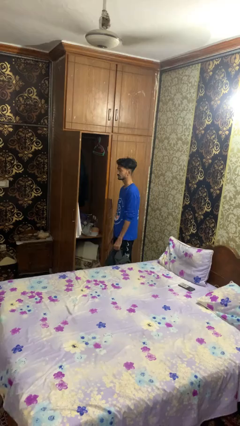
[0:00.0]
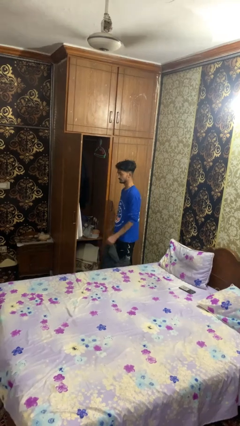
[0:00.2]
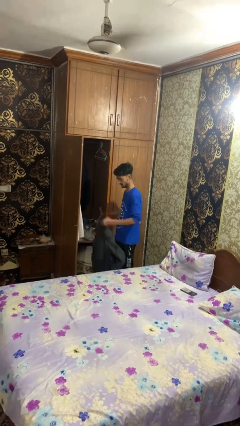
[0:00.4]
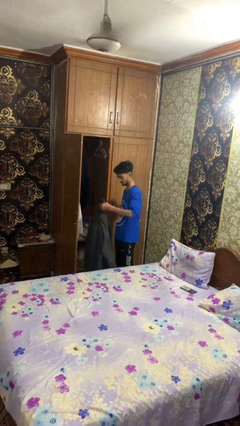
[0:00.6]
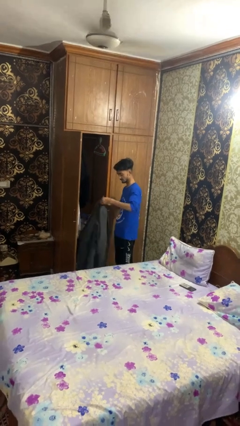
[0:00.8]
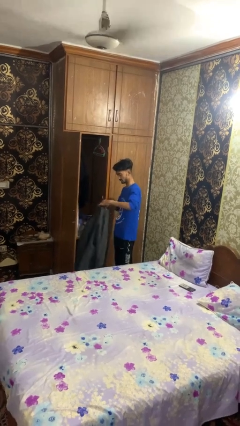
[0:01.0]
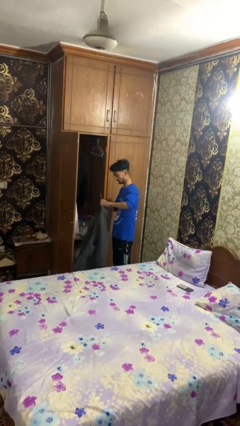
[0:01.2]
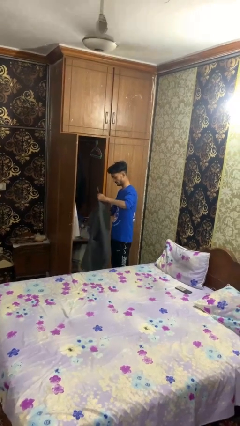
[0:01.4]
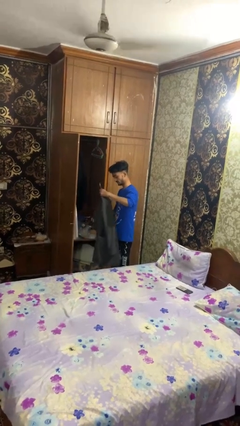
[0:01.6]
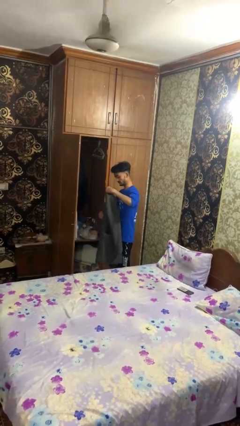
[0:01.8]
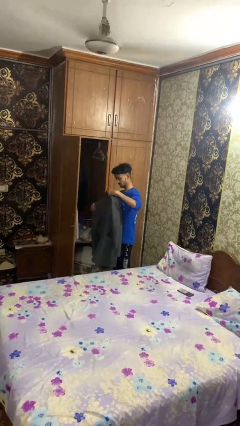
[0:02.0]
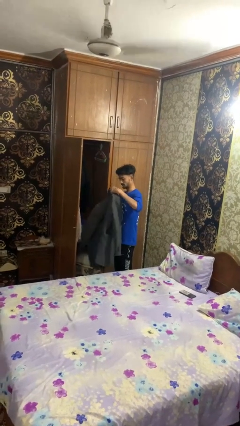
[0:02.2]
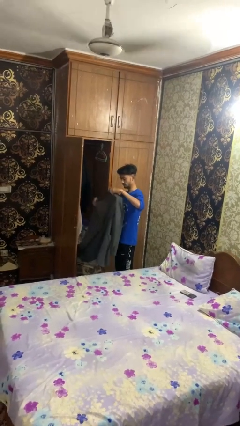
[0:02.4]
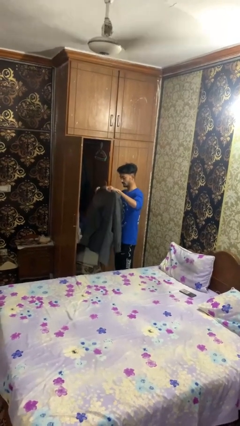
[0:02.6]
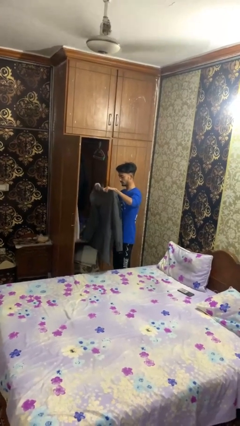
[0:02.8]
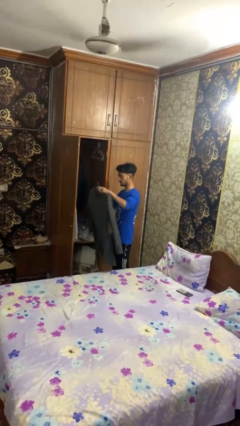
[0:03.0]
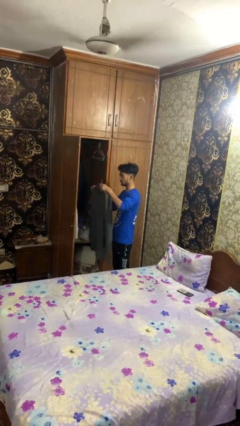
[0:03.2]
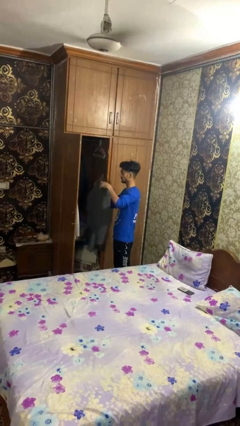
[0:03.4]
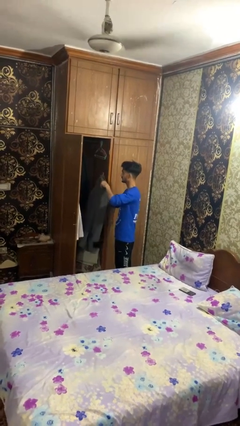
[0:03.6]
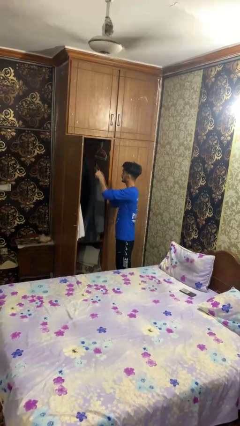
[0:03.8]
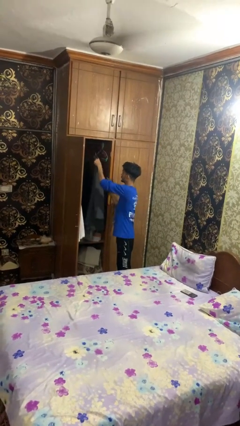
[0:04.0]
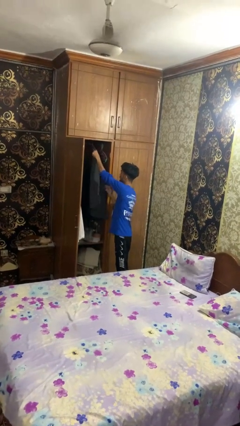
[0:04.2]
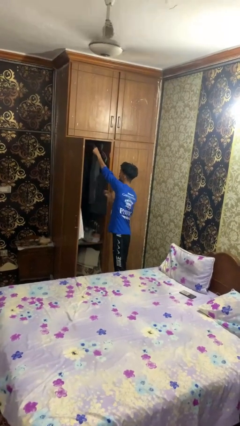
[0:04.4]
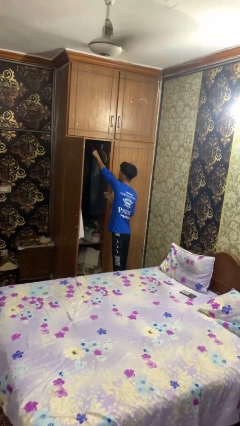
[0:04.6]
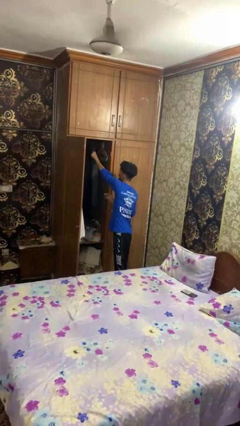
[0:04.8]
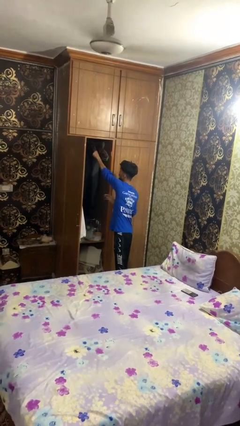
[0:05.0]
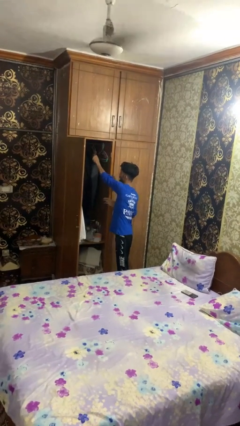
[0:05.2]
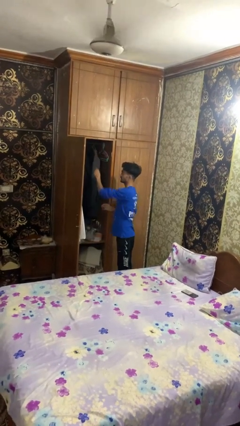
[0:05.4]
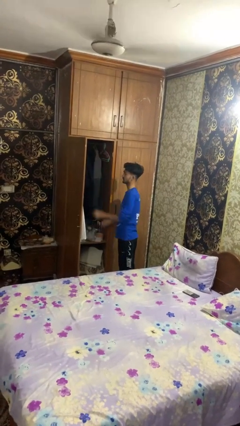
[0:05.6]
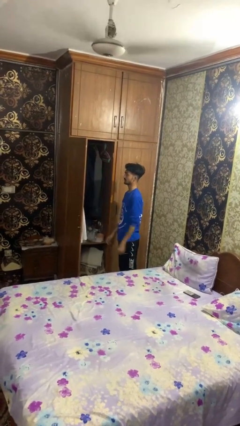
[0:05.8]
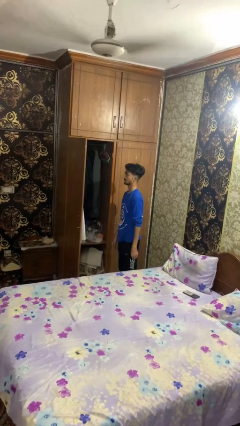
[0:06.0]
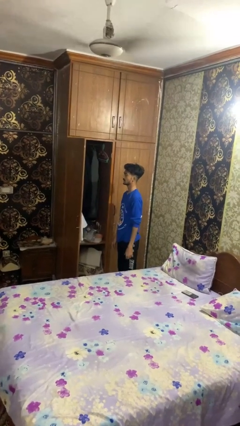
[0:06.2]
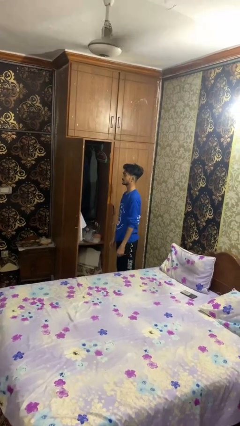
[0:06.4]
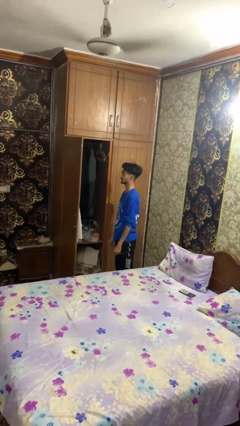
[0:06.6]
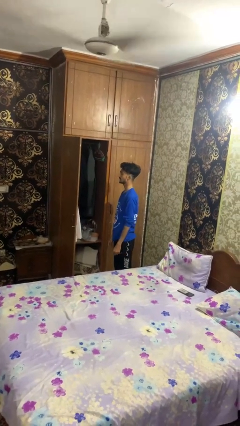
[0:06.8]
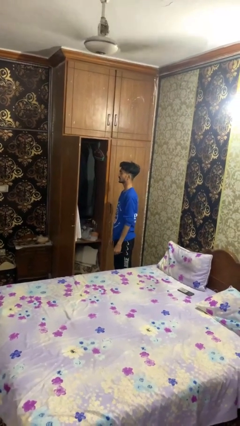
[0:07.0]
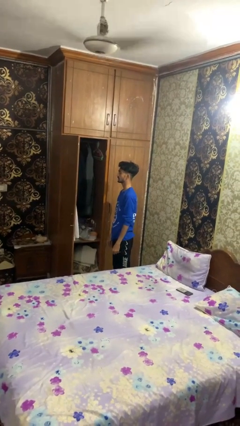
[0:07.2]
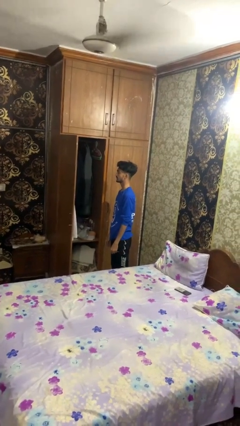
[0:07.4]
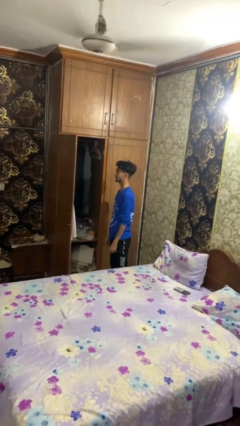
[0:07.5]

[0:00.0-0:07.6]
person puts clothes into closet

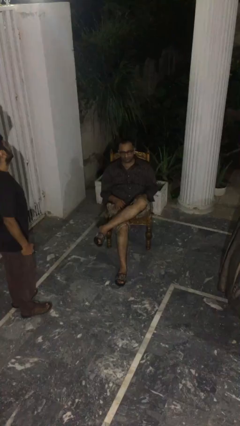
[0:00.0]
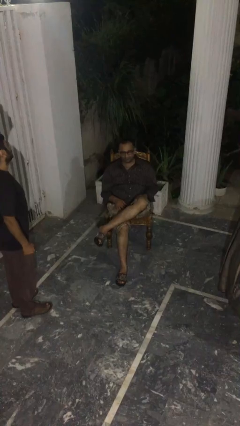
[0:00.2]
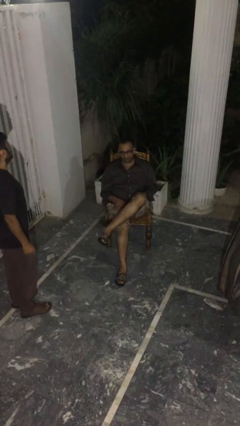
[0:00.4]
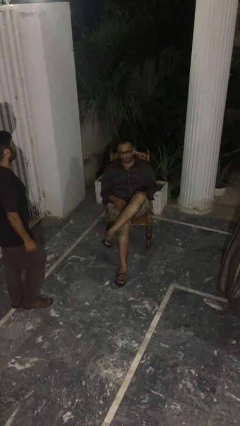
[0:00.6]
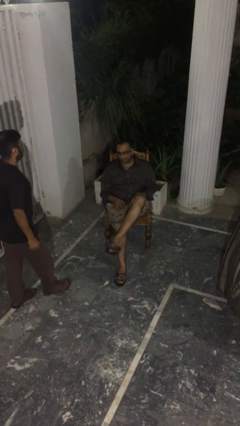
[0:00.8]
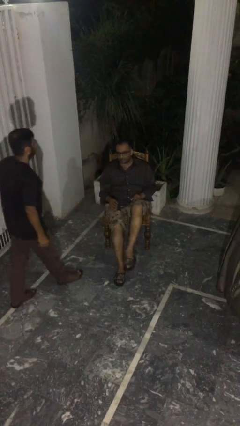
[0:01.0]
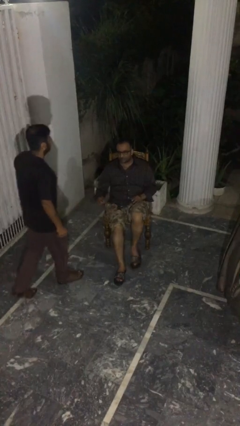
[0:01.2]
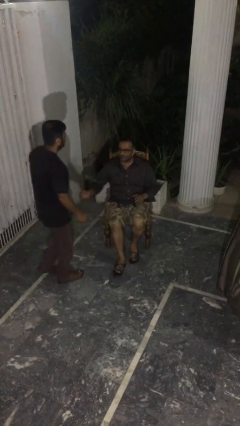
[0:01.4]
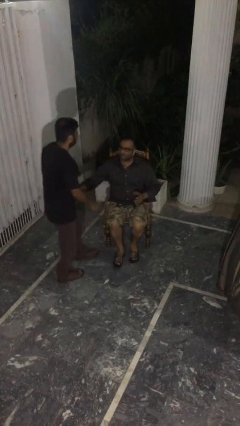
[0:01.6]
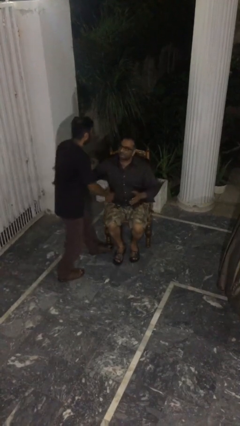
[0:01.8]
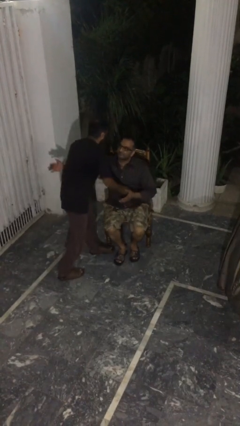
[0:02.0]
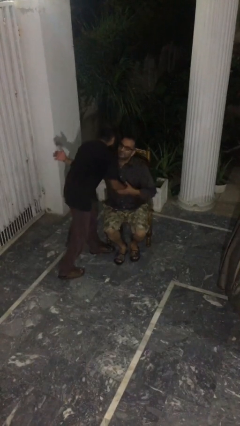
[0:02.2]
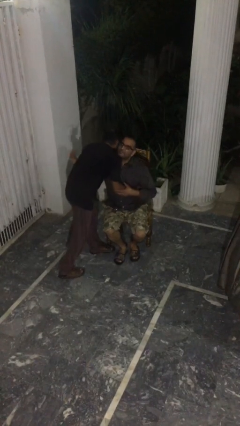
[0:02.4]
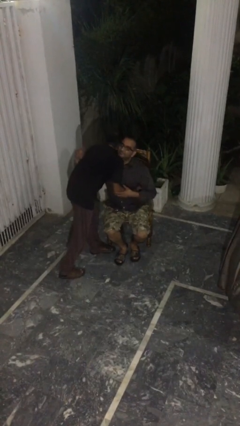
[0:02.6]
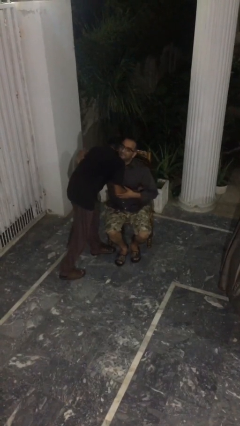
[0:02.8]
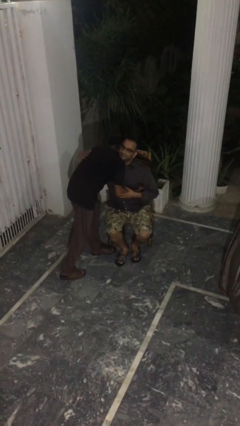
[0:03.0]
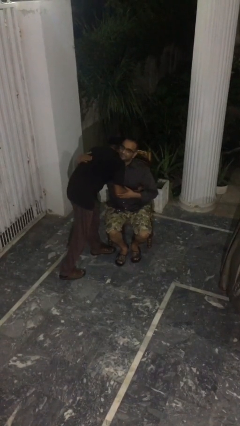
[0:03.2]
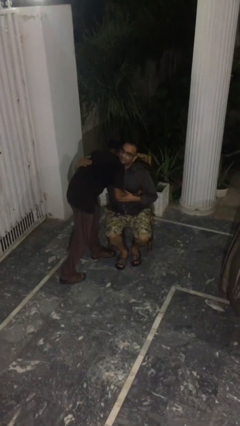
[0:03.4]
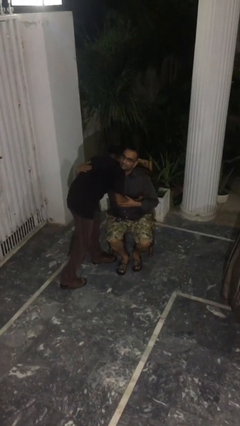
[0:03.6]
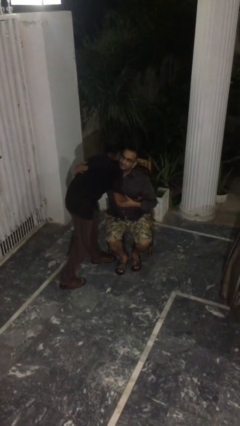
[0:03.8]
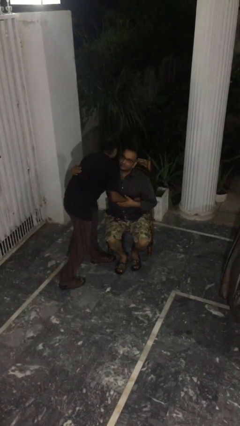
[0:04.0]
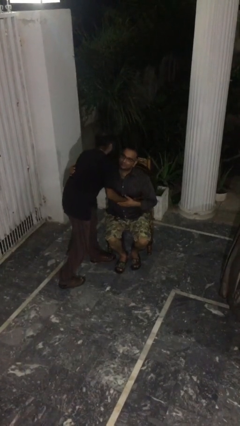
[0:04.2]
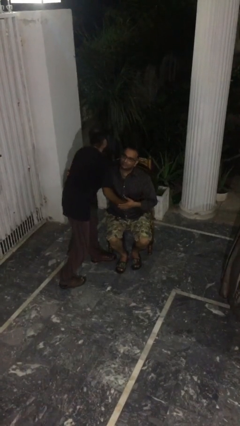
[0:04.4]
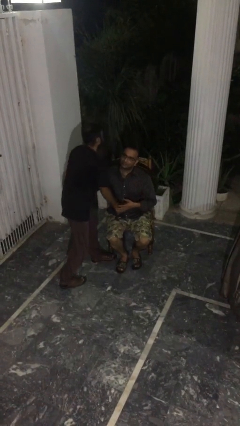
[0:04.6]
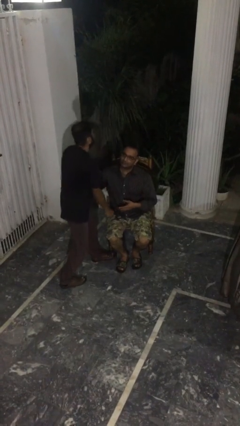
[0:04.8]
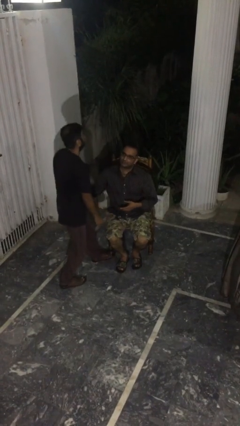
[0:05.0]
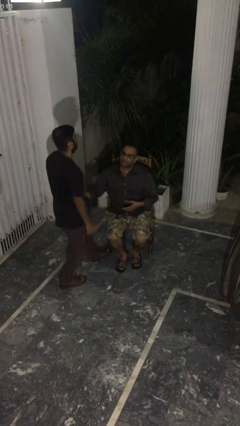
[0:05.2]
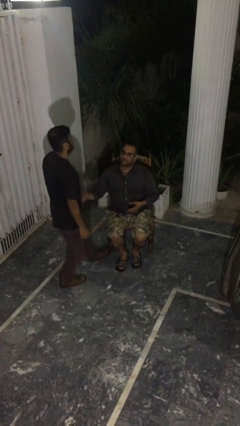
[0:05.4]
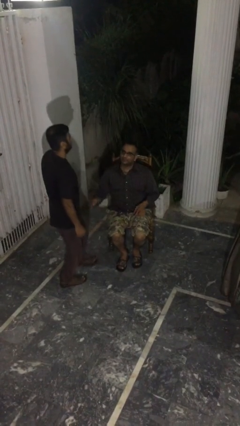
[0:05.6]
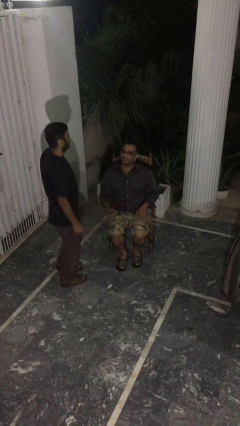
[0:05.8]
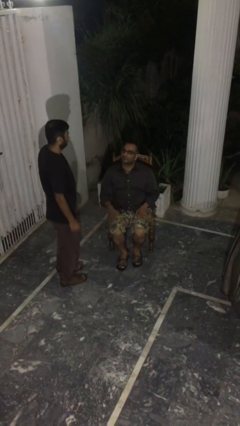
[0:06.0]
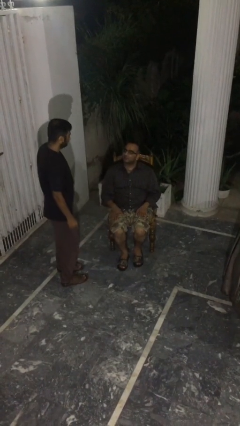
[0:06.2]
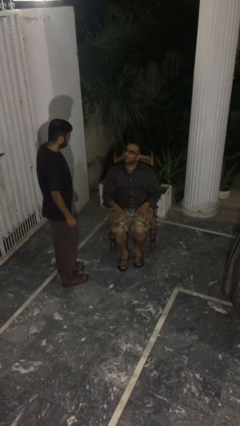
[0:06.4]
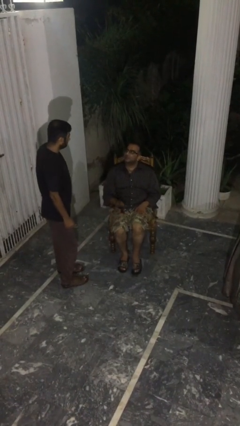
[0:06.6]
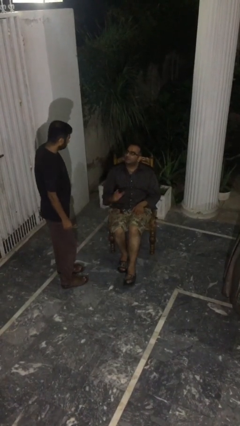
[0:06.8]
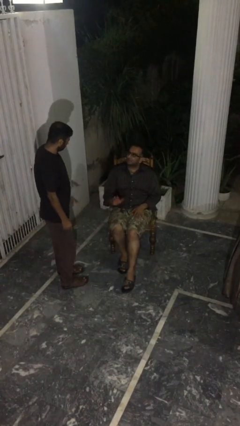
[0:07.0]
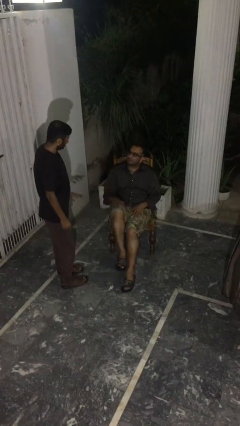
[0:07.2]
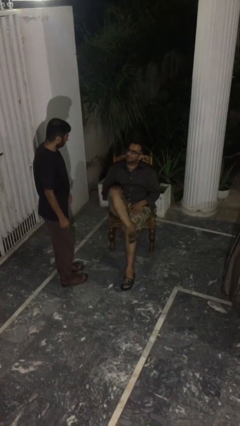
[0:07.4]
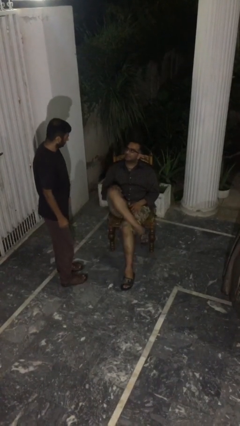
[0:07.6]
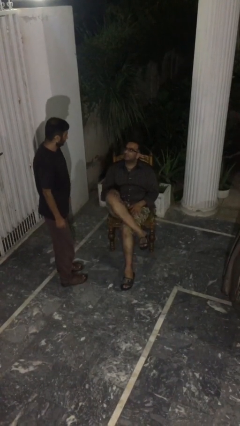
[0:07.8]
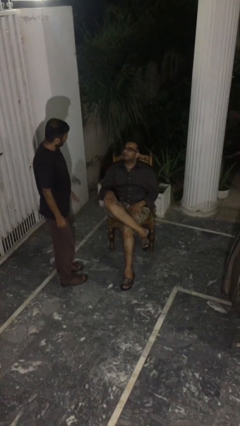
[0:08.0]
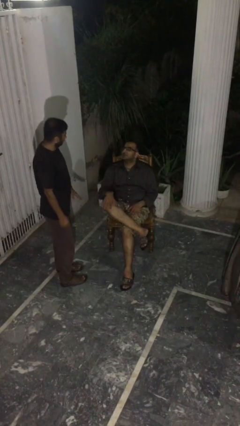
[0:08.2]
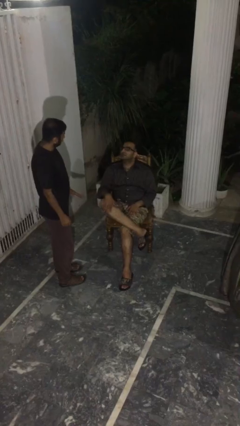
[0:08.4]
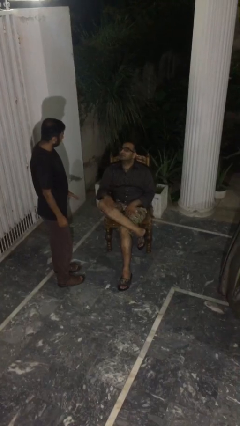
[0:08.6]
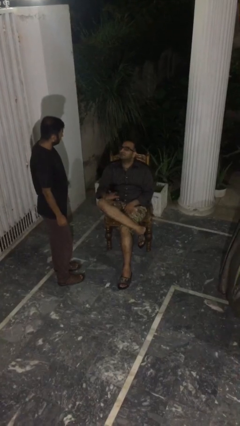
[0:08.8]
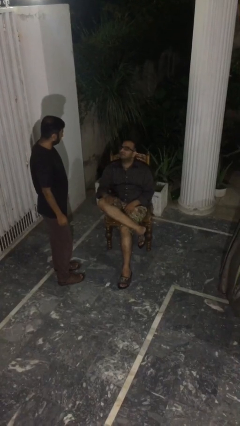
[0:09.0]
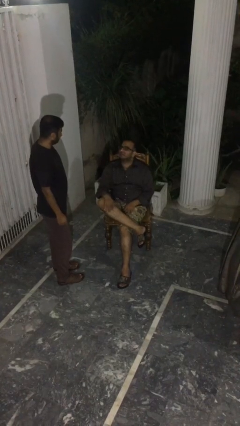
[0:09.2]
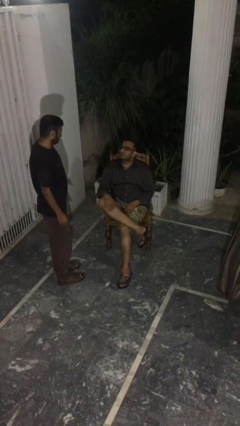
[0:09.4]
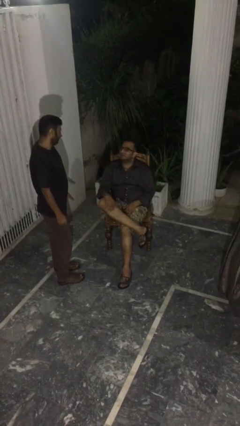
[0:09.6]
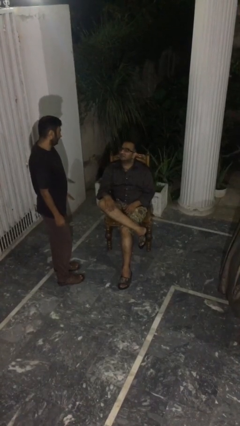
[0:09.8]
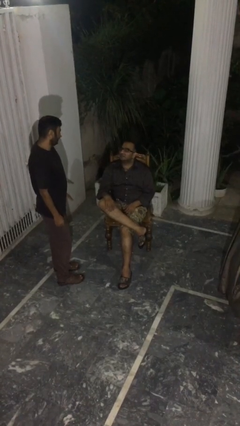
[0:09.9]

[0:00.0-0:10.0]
person embraces person
